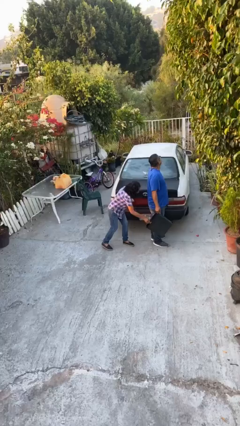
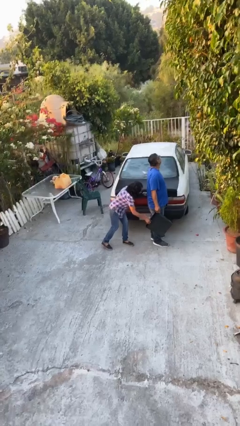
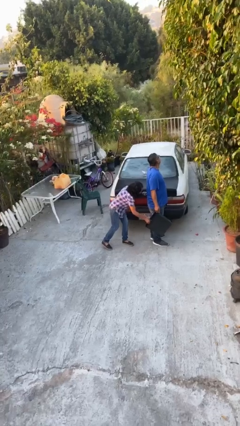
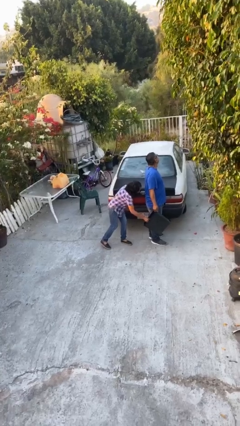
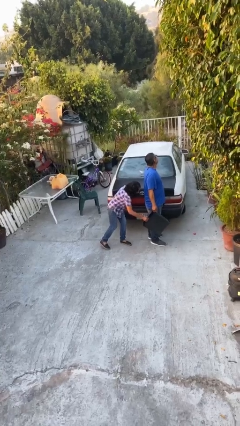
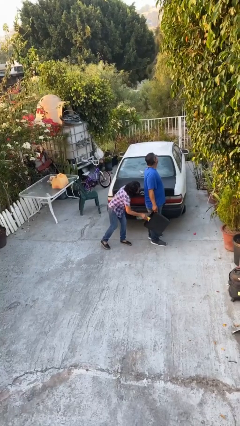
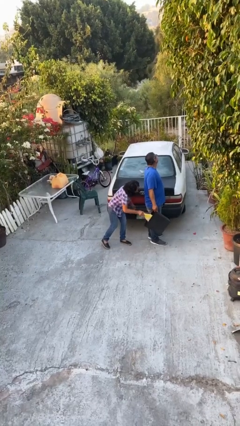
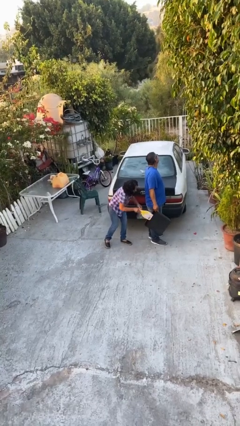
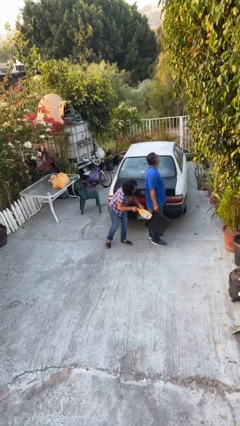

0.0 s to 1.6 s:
person steals object from person

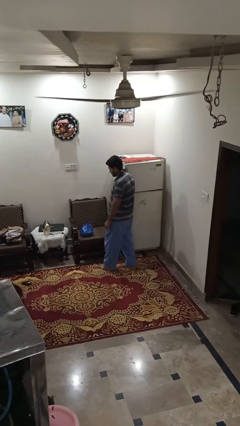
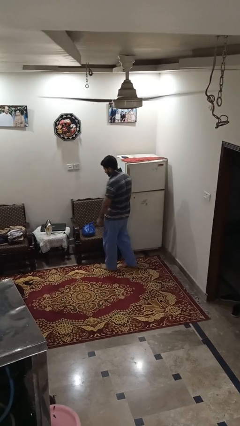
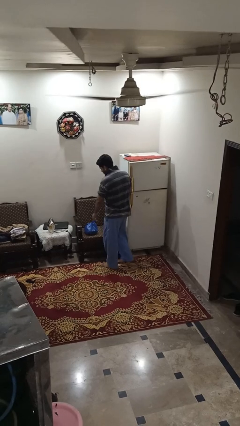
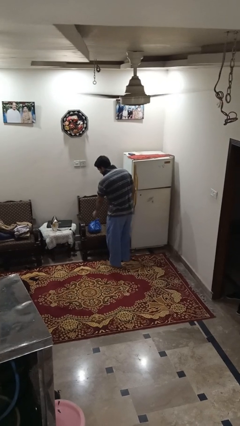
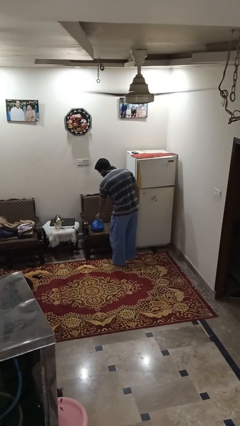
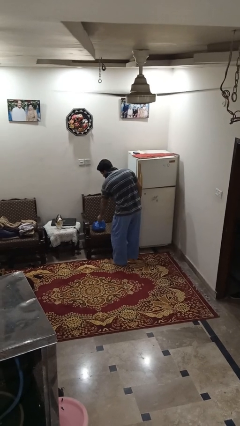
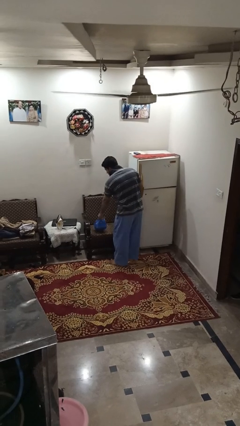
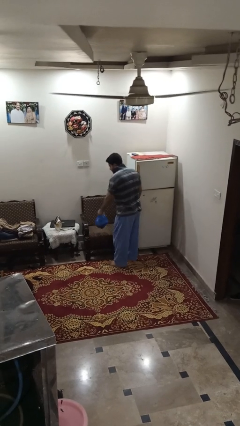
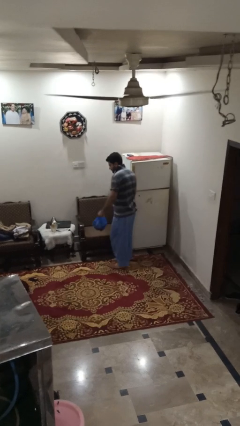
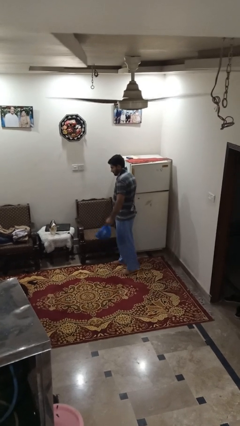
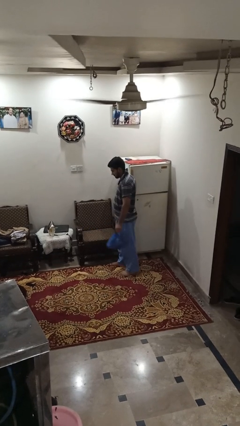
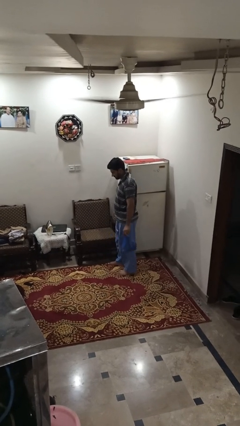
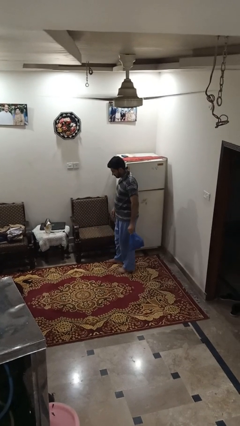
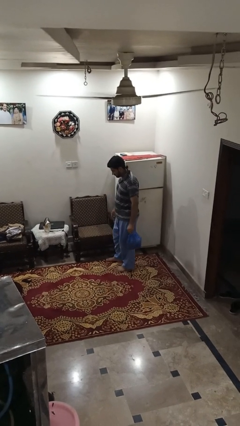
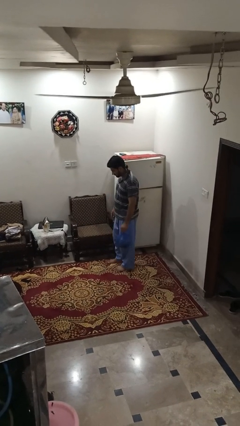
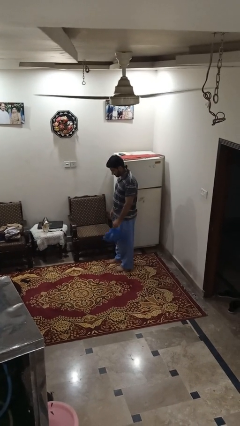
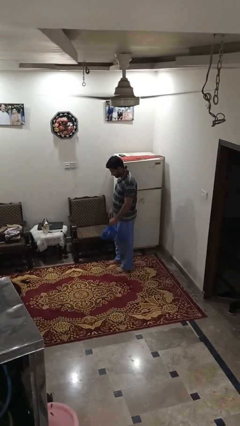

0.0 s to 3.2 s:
person picks up object from couch

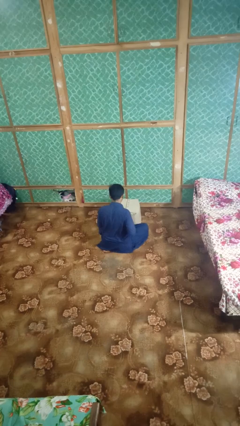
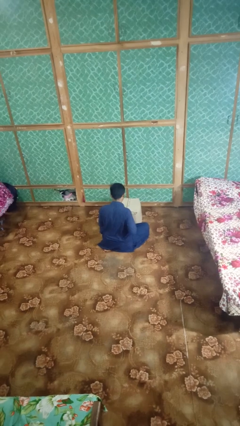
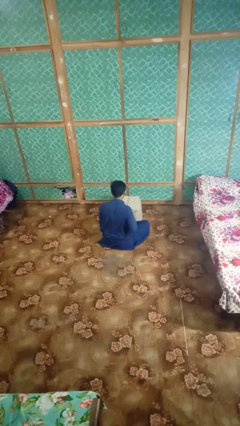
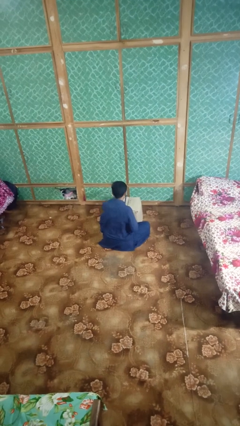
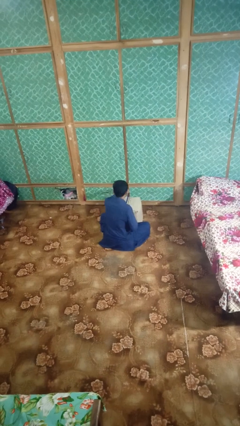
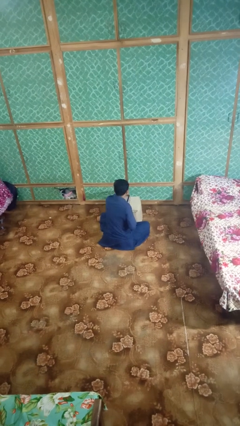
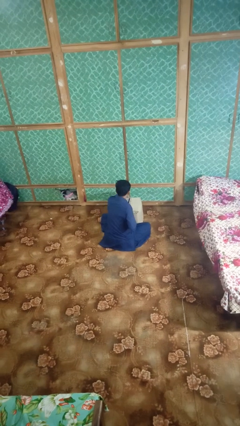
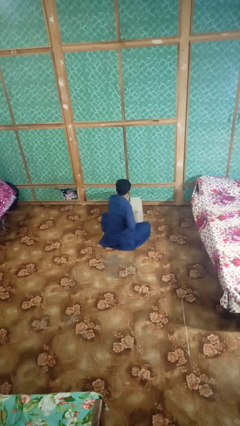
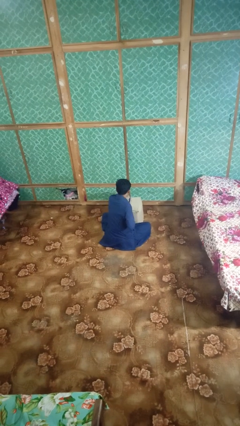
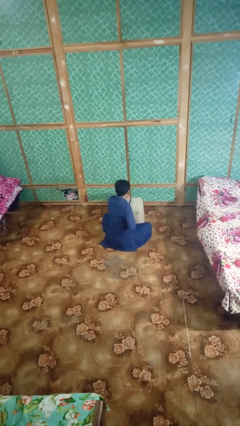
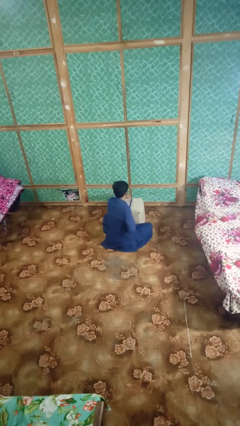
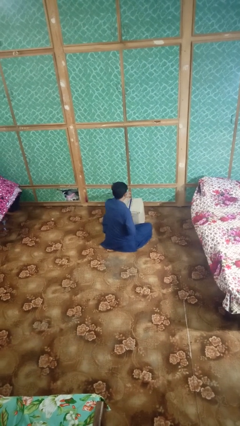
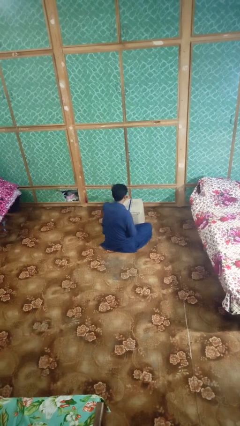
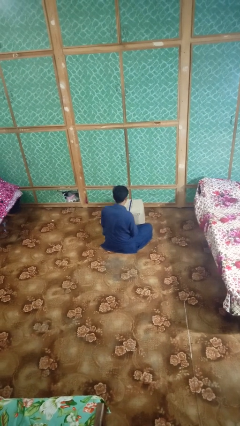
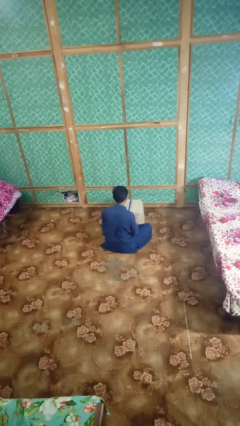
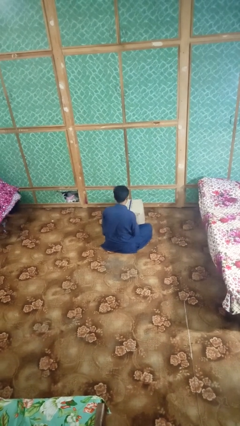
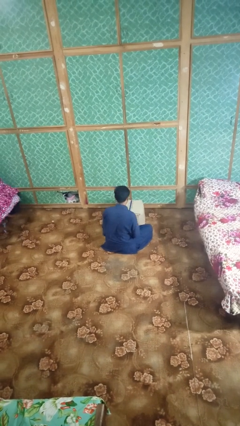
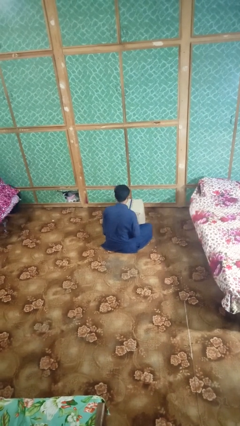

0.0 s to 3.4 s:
person wraps box

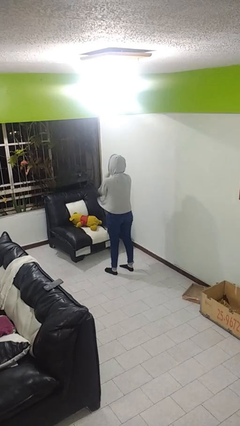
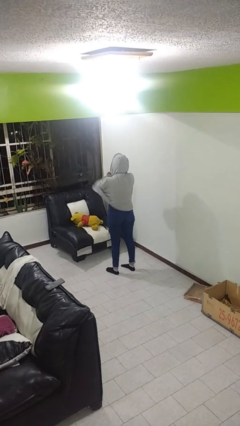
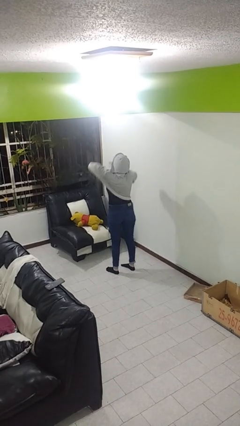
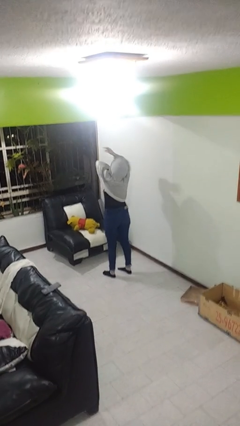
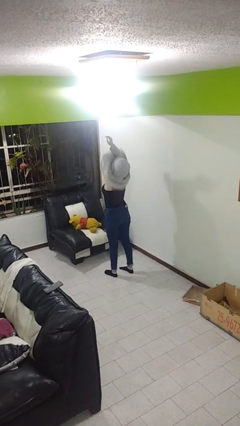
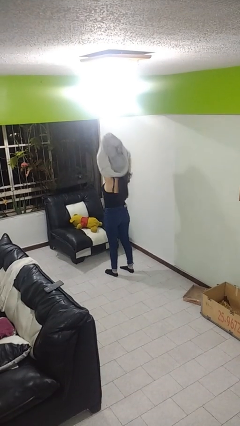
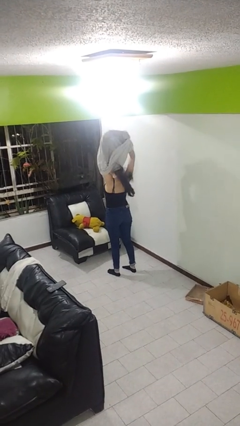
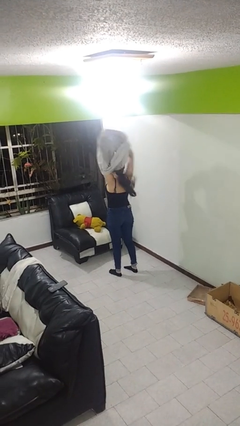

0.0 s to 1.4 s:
person takes off hoodie

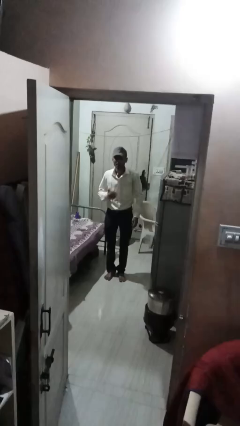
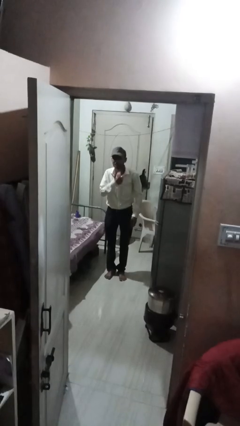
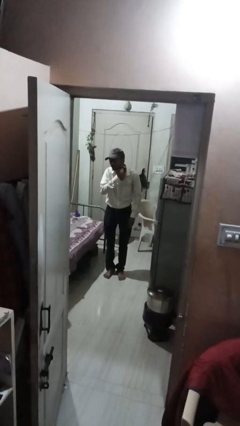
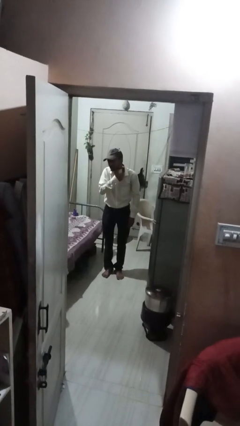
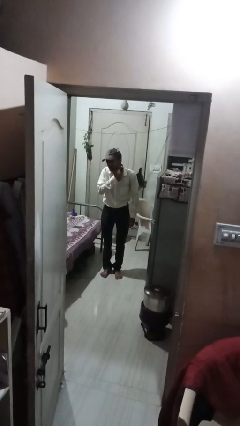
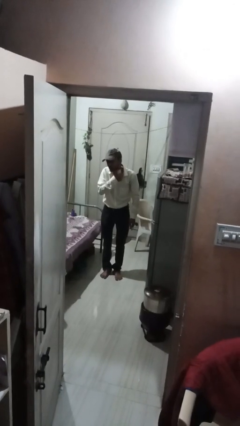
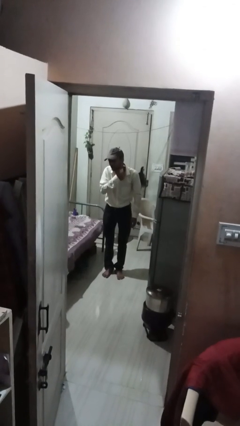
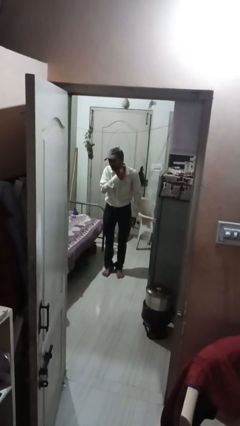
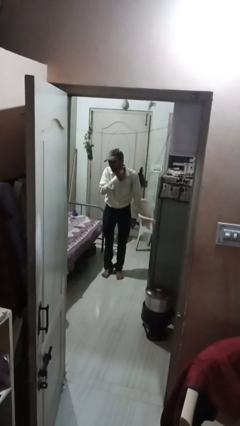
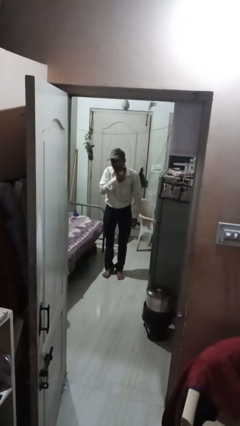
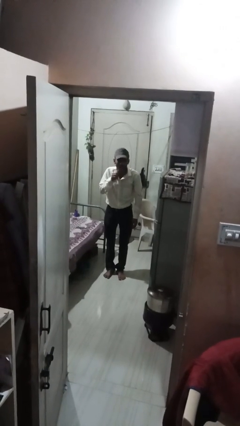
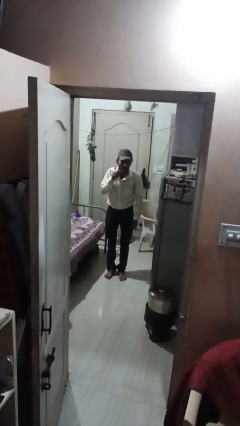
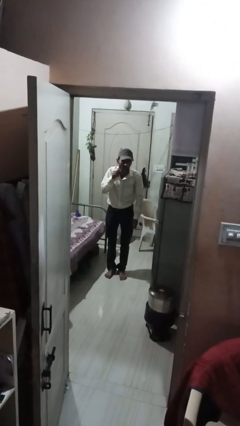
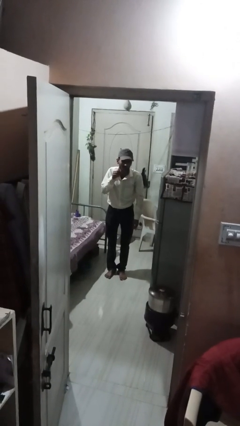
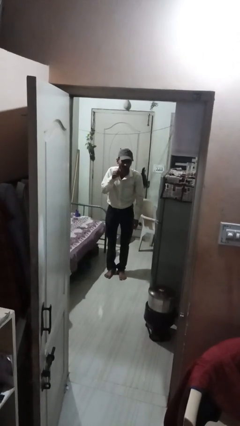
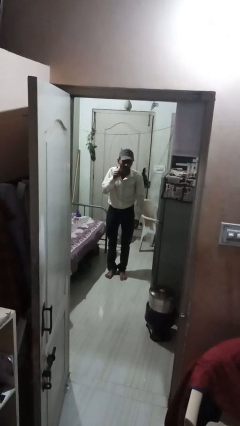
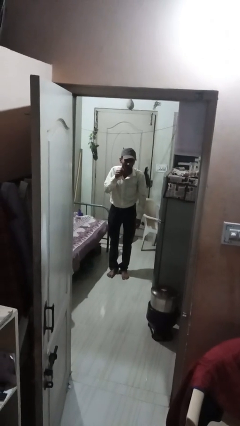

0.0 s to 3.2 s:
person applies deodorant

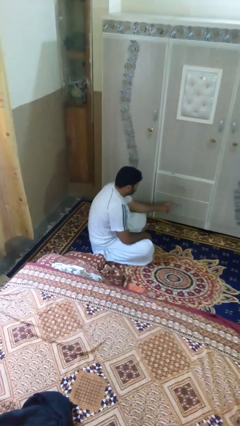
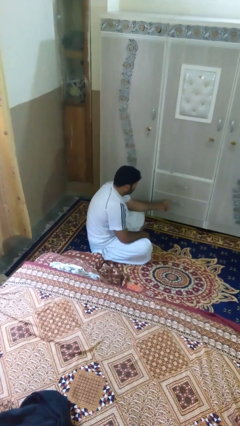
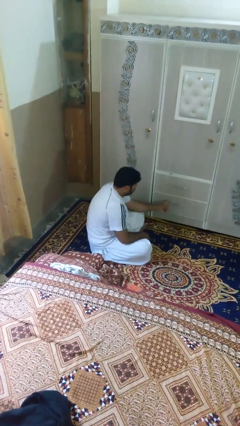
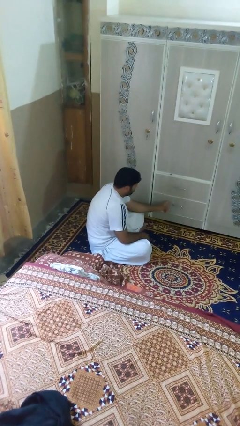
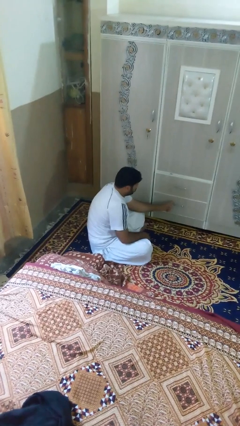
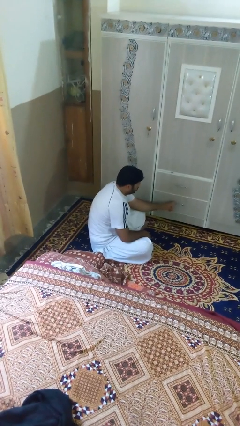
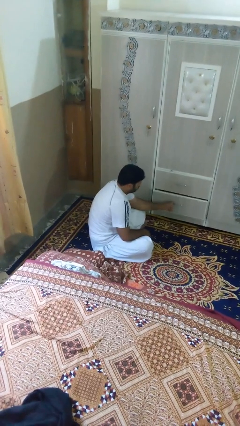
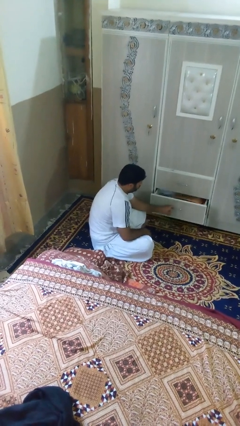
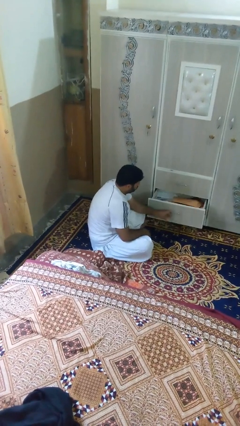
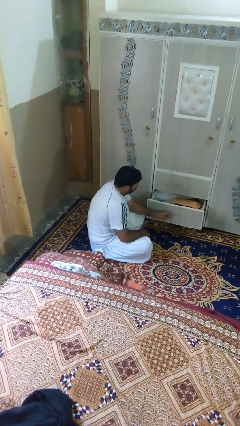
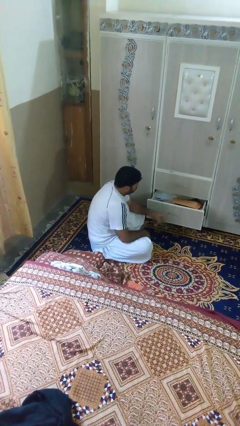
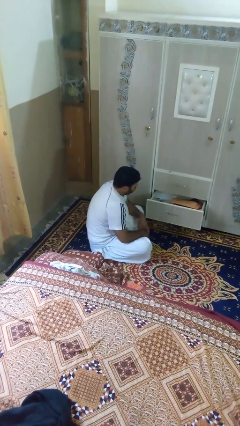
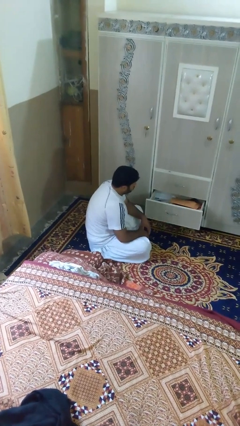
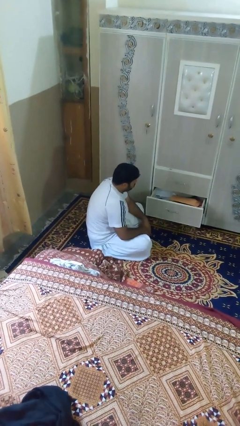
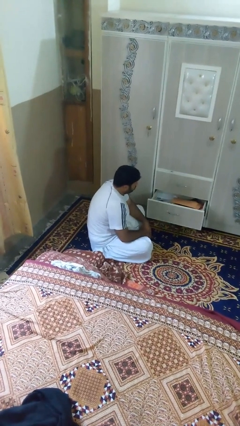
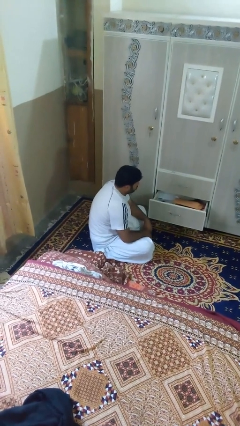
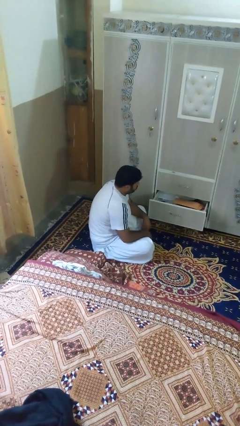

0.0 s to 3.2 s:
person opens dresser drawer

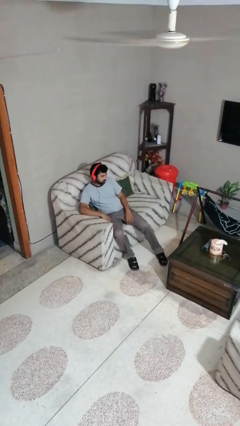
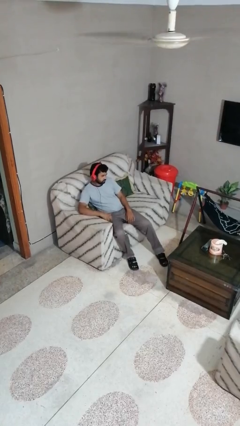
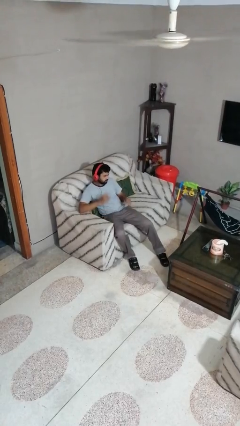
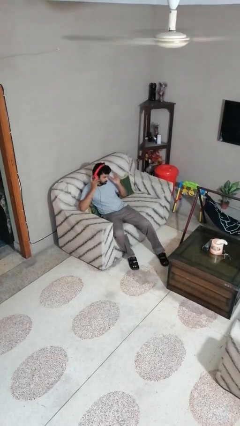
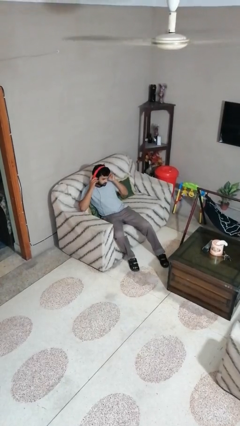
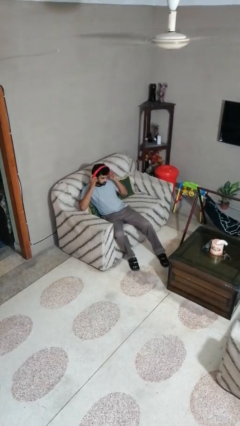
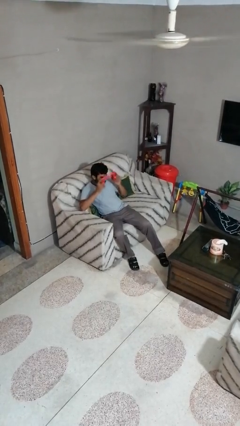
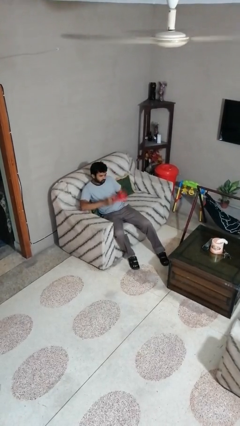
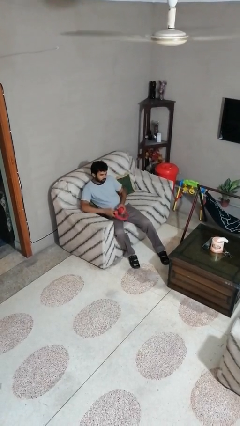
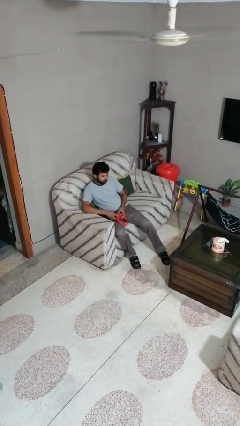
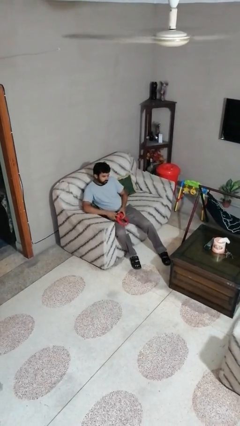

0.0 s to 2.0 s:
person takes off headphones
